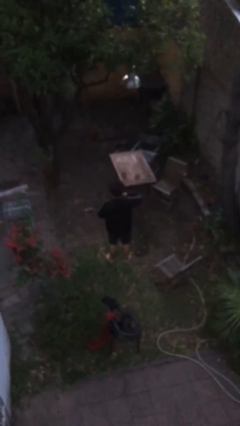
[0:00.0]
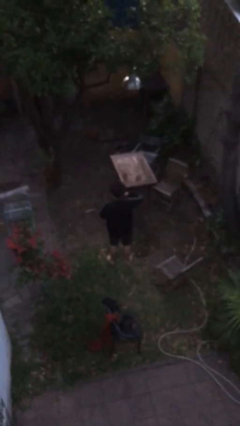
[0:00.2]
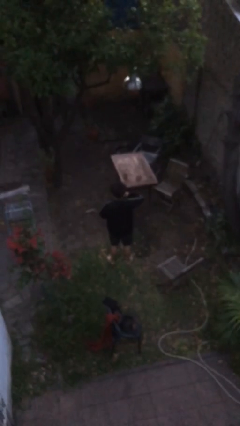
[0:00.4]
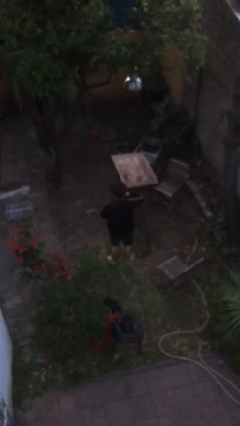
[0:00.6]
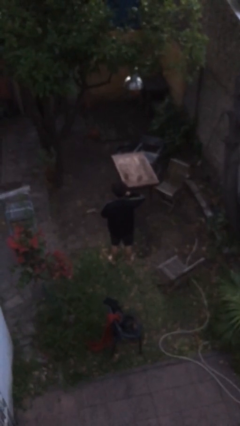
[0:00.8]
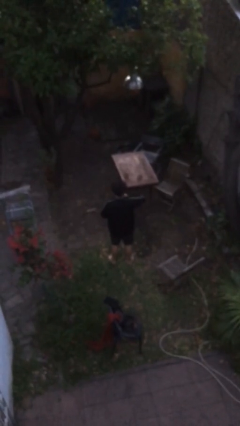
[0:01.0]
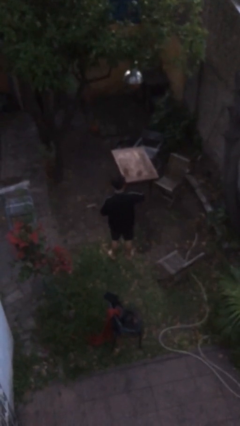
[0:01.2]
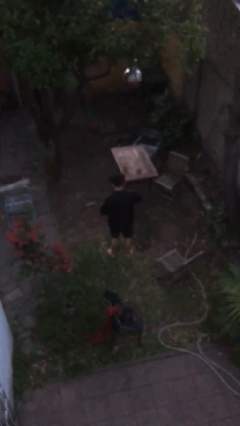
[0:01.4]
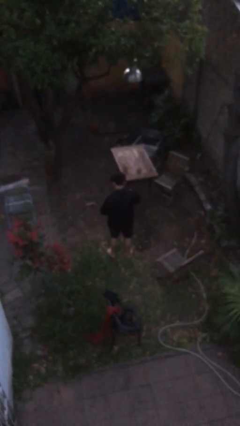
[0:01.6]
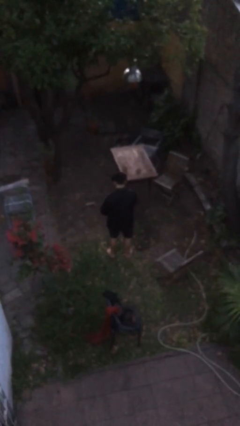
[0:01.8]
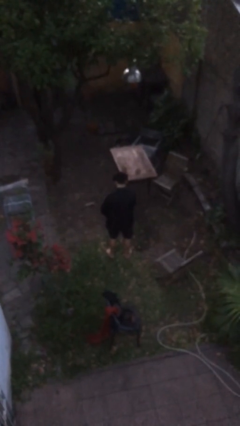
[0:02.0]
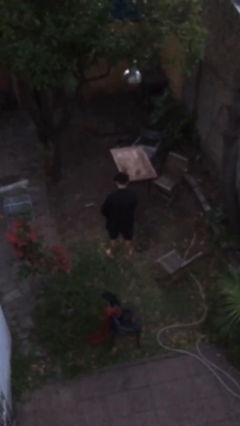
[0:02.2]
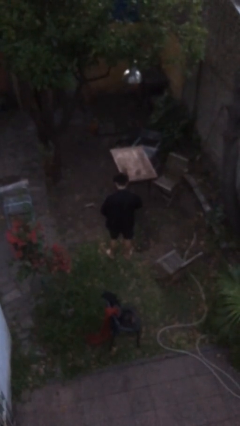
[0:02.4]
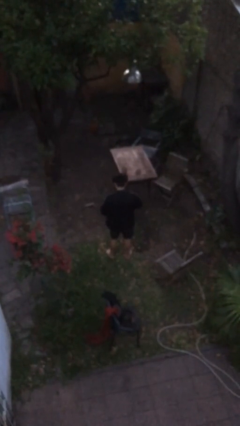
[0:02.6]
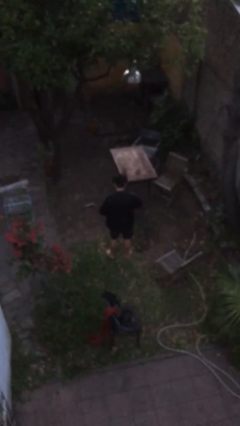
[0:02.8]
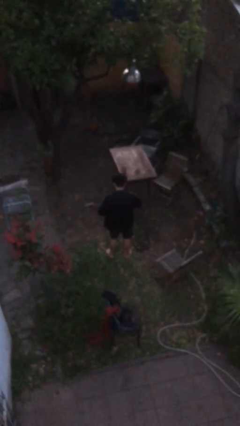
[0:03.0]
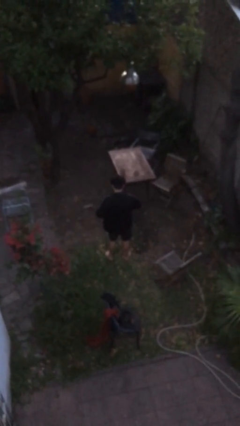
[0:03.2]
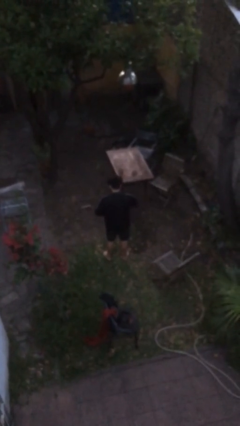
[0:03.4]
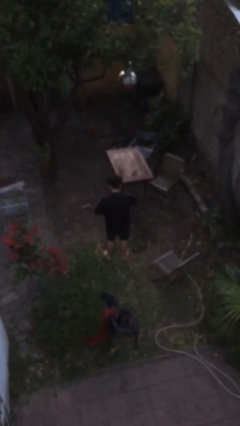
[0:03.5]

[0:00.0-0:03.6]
person unzips jacket

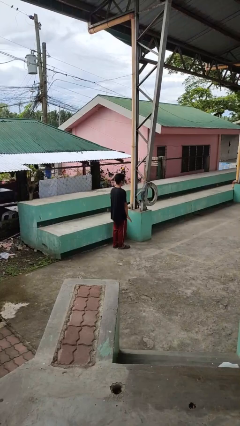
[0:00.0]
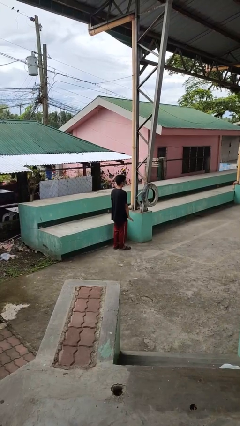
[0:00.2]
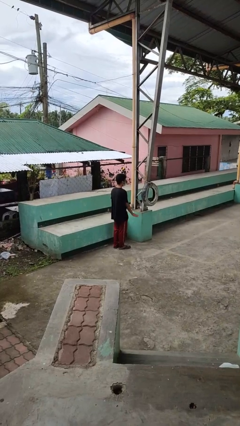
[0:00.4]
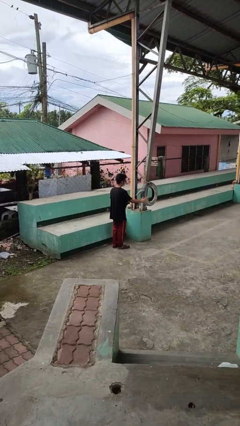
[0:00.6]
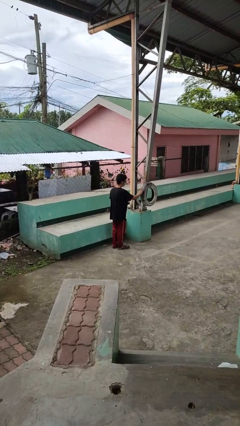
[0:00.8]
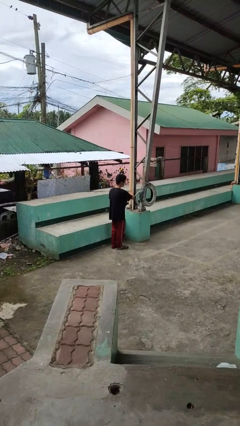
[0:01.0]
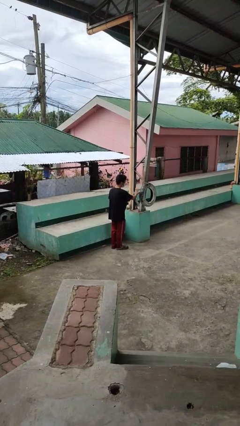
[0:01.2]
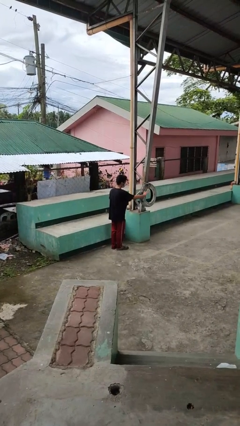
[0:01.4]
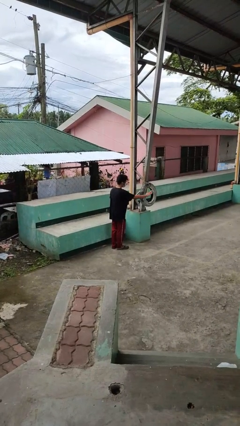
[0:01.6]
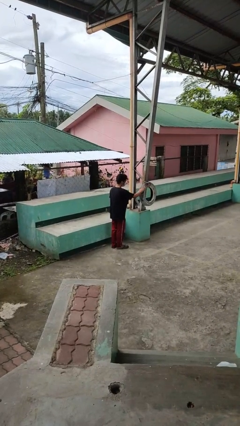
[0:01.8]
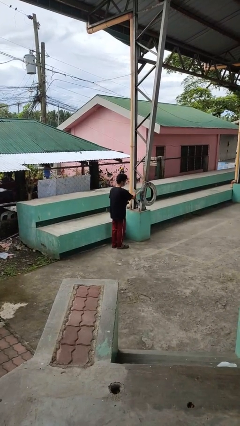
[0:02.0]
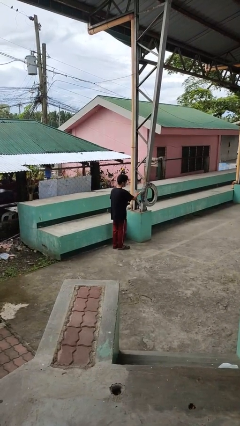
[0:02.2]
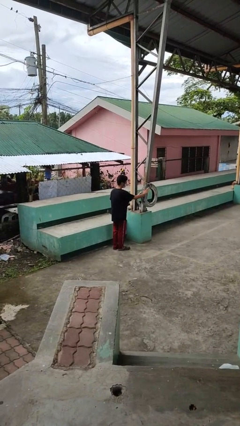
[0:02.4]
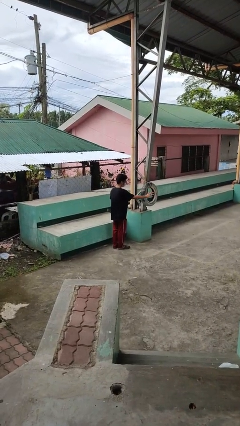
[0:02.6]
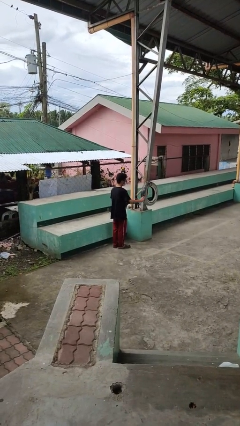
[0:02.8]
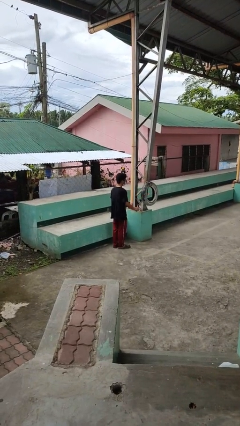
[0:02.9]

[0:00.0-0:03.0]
person waves hand over object

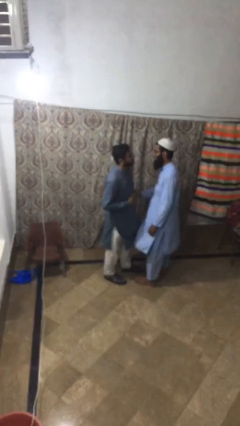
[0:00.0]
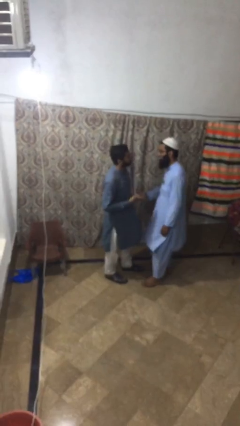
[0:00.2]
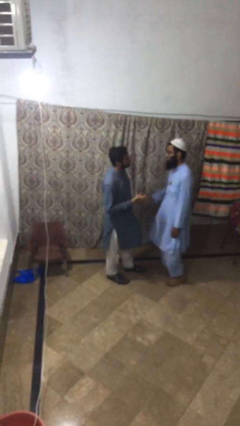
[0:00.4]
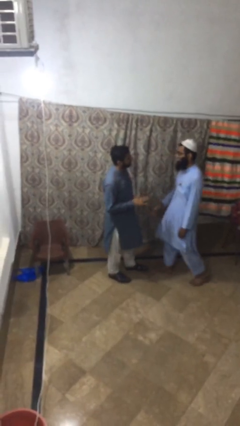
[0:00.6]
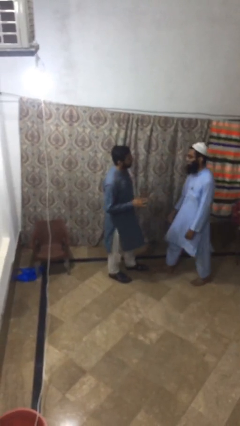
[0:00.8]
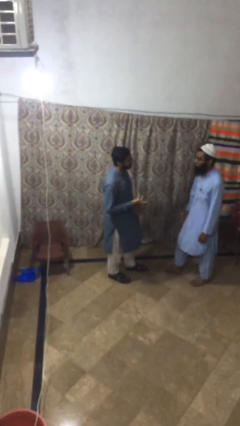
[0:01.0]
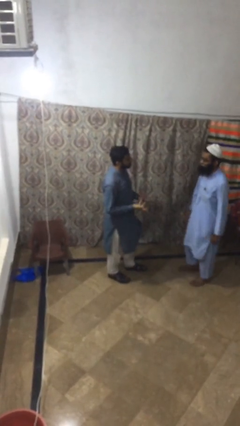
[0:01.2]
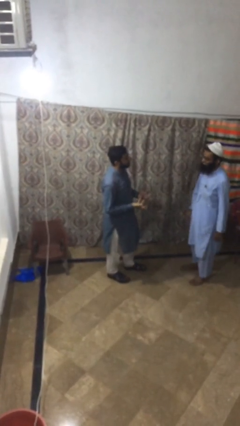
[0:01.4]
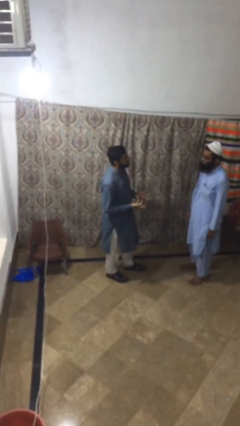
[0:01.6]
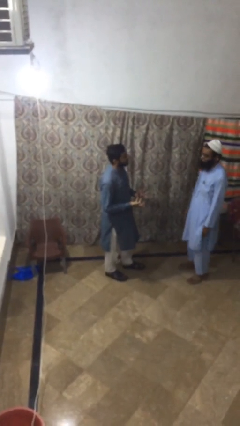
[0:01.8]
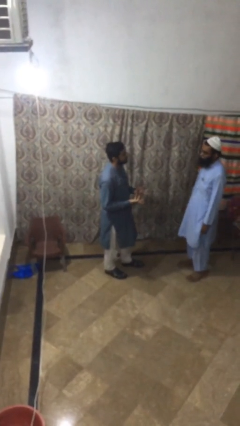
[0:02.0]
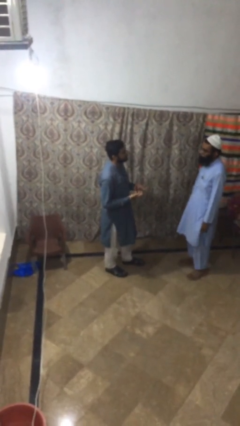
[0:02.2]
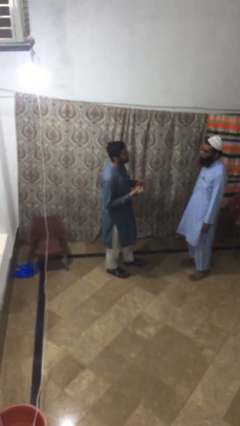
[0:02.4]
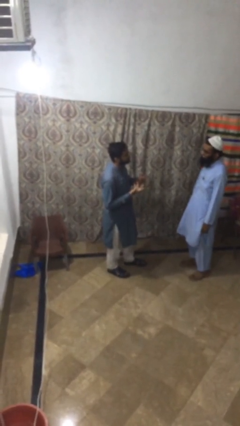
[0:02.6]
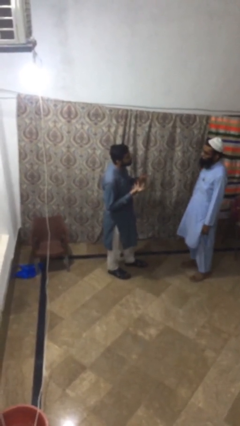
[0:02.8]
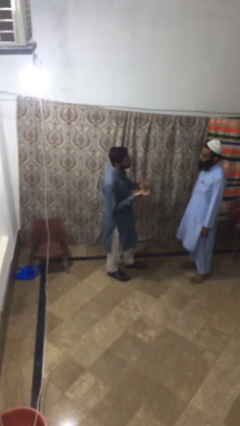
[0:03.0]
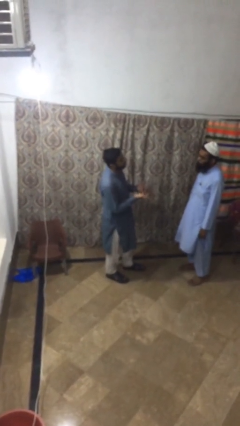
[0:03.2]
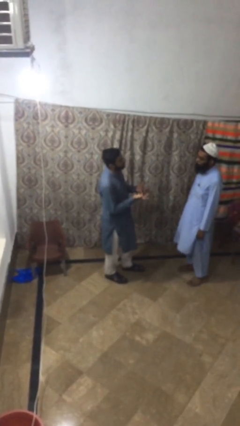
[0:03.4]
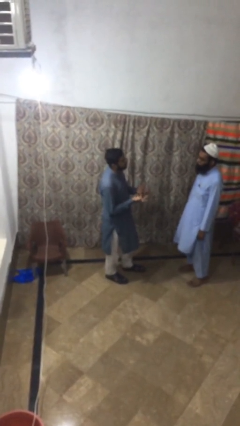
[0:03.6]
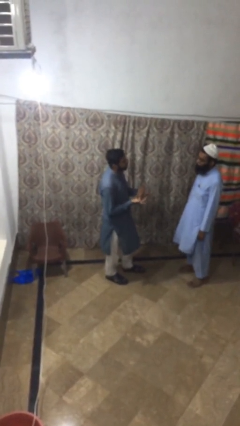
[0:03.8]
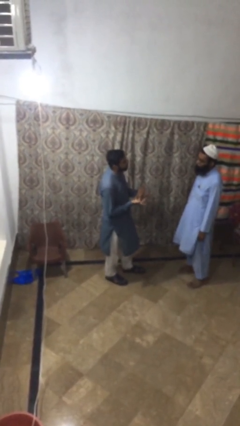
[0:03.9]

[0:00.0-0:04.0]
person talks to person

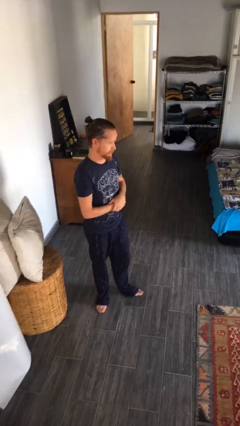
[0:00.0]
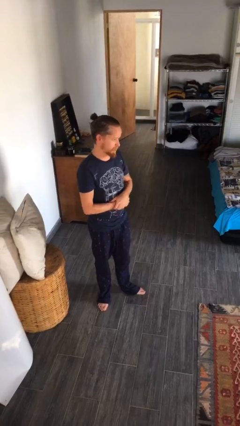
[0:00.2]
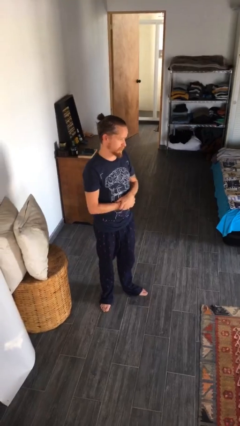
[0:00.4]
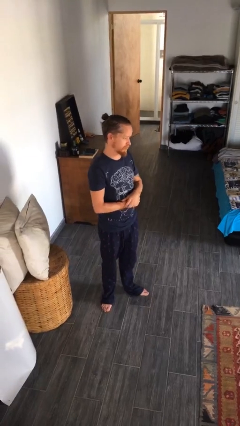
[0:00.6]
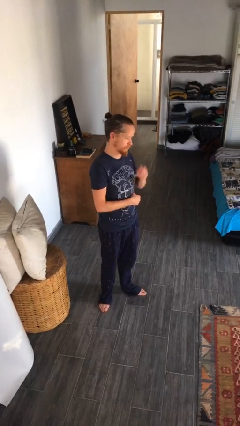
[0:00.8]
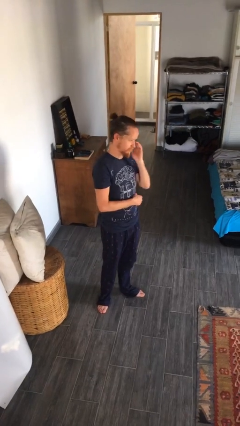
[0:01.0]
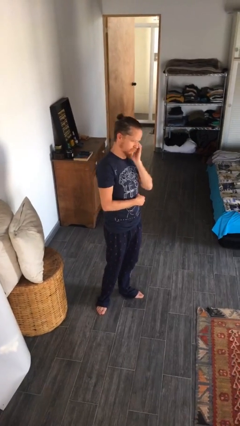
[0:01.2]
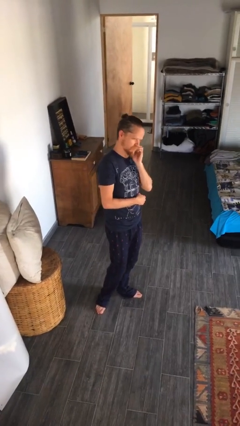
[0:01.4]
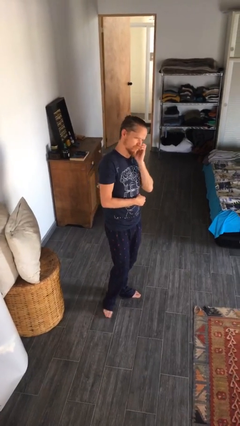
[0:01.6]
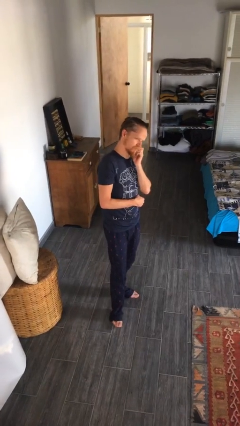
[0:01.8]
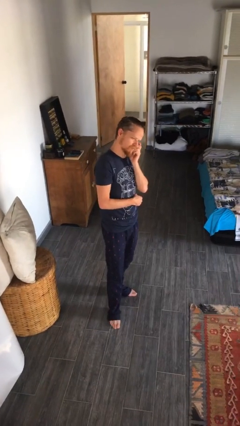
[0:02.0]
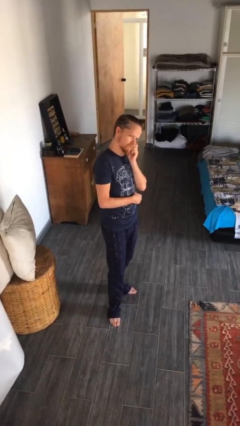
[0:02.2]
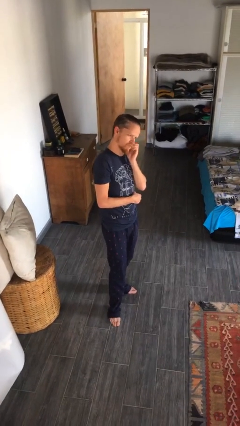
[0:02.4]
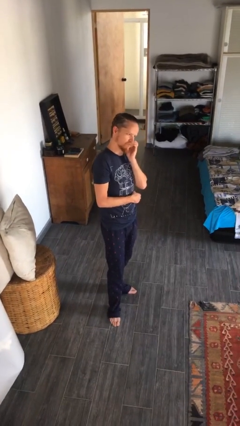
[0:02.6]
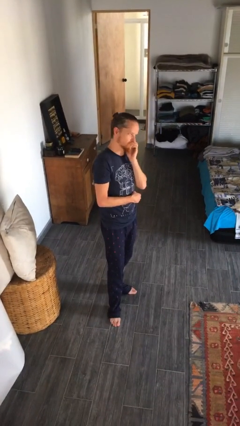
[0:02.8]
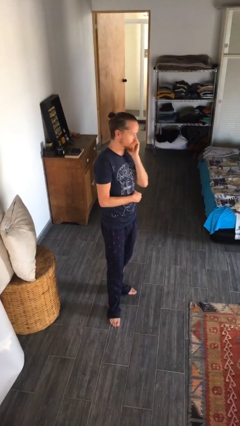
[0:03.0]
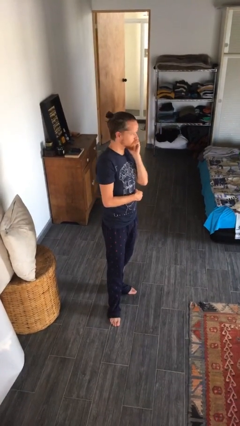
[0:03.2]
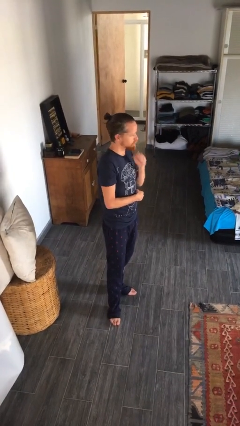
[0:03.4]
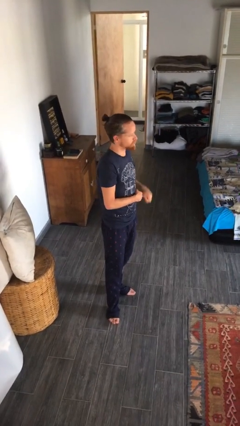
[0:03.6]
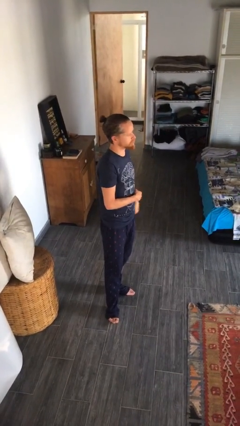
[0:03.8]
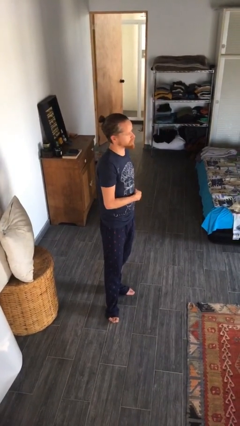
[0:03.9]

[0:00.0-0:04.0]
person scratches face

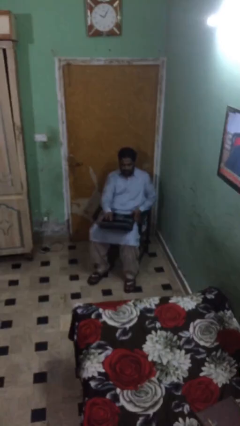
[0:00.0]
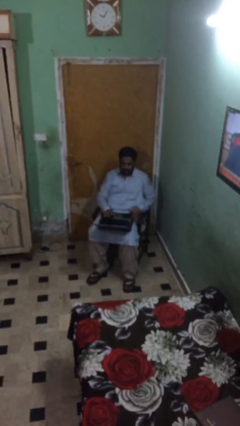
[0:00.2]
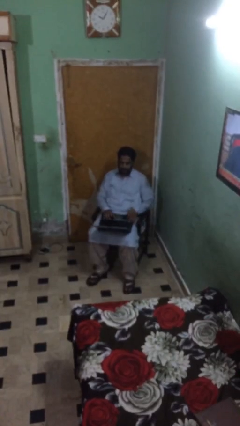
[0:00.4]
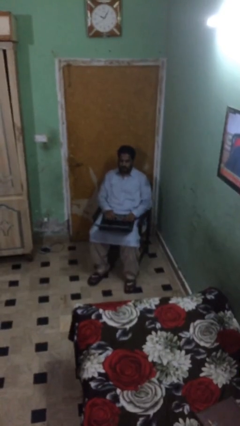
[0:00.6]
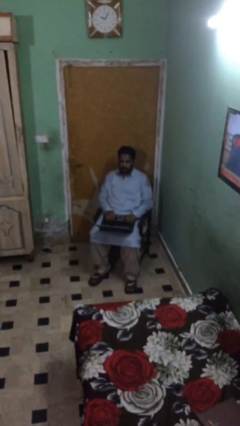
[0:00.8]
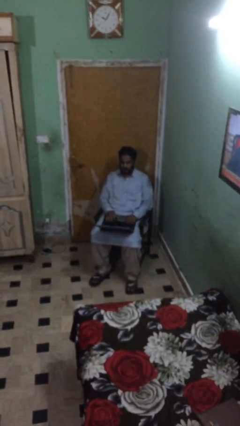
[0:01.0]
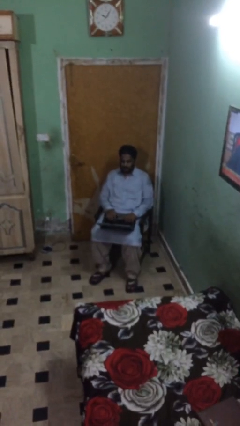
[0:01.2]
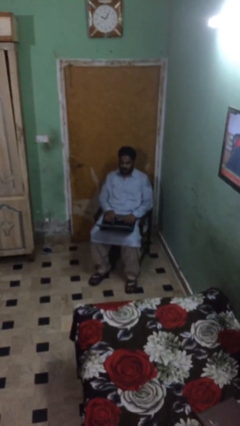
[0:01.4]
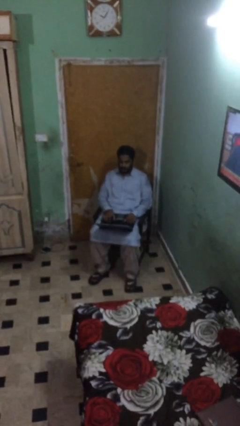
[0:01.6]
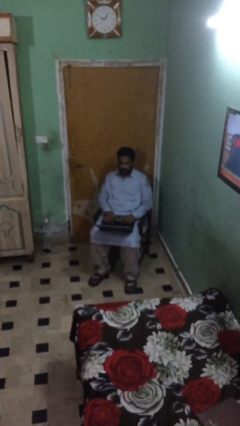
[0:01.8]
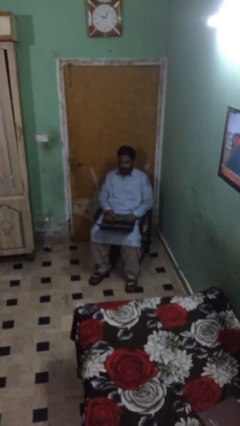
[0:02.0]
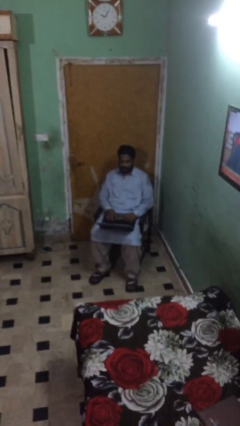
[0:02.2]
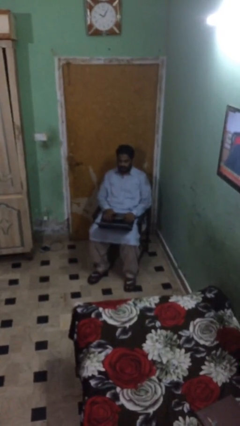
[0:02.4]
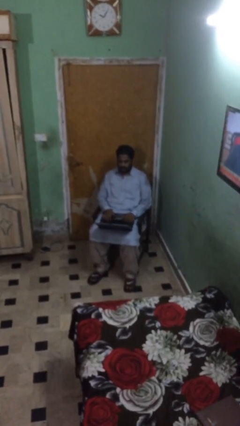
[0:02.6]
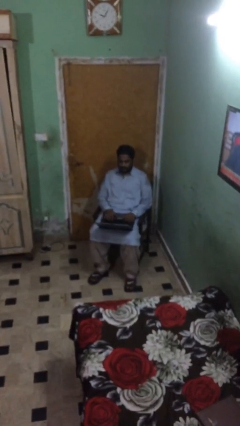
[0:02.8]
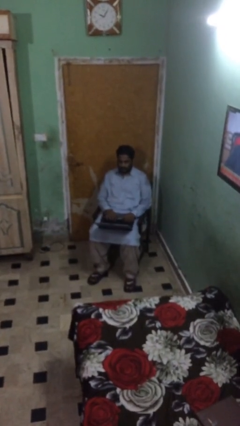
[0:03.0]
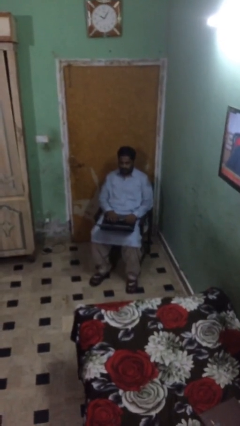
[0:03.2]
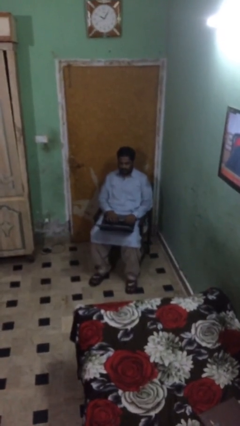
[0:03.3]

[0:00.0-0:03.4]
person interacts with laptop
